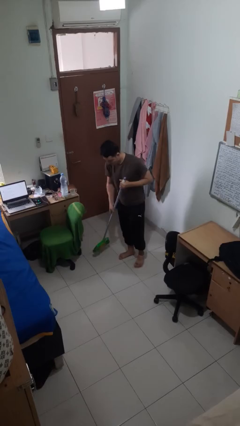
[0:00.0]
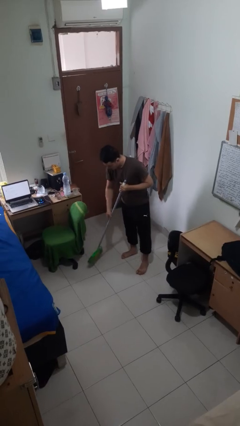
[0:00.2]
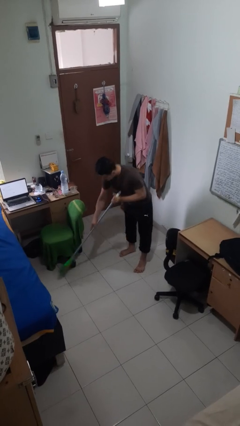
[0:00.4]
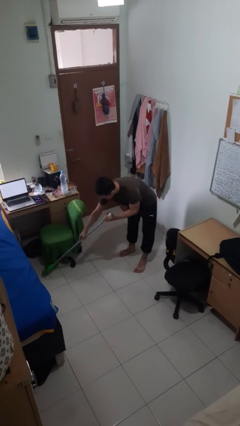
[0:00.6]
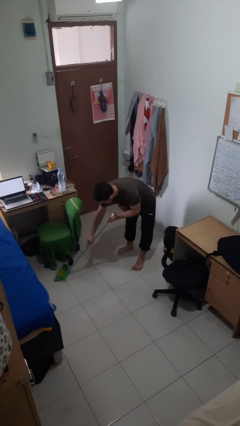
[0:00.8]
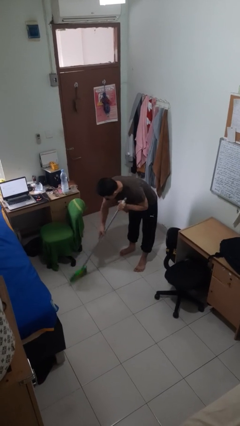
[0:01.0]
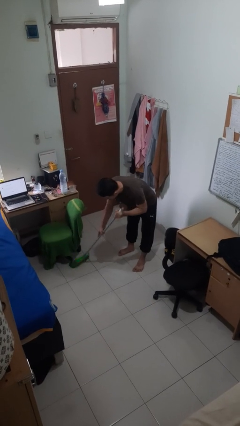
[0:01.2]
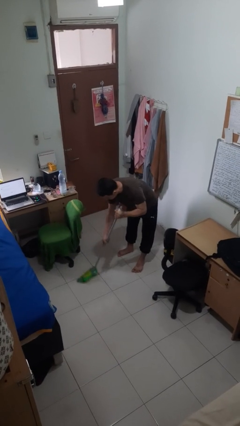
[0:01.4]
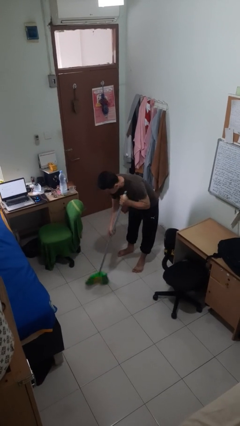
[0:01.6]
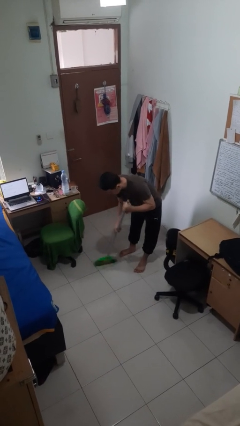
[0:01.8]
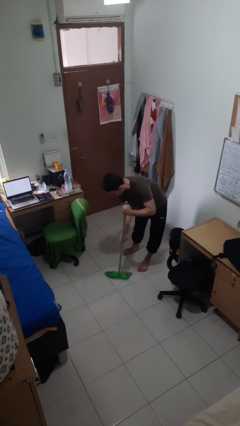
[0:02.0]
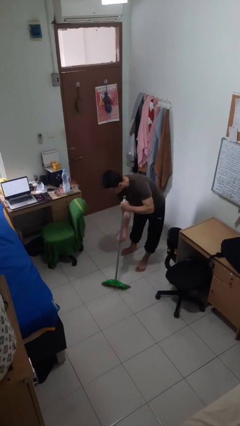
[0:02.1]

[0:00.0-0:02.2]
person sweeps floor

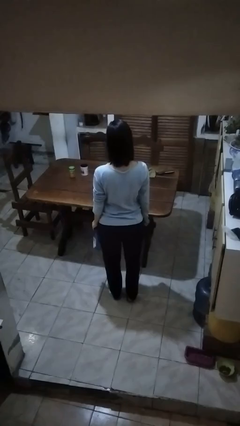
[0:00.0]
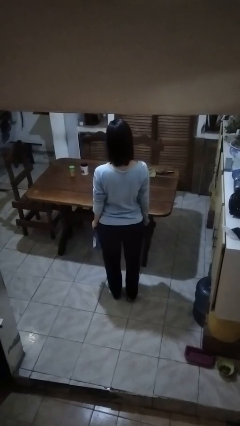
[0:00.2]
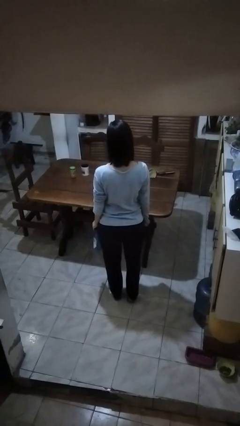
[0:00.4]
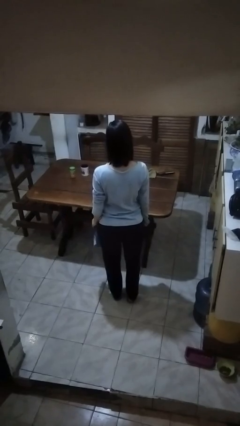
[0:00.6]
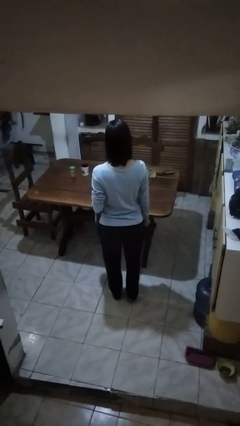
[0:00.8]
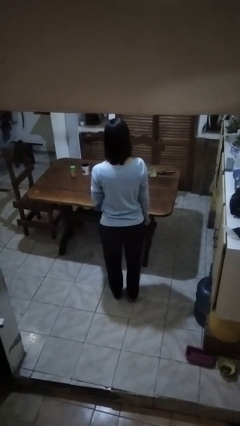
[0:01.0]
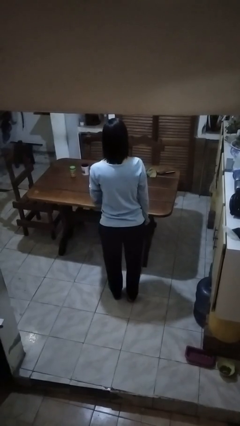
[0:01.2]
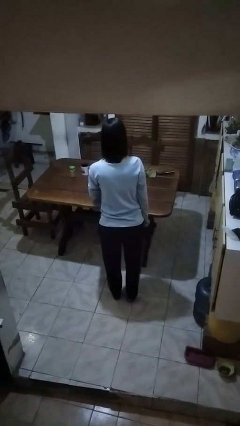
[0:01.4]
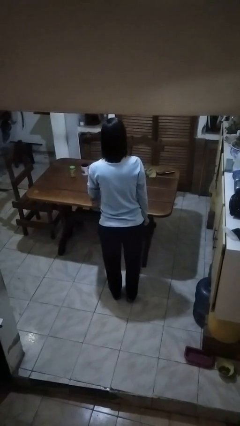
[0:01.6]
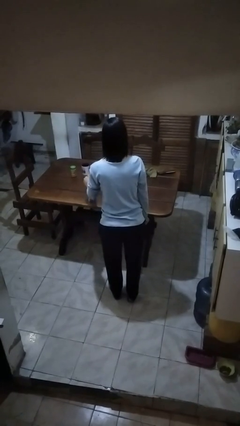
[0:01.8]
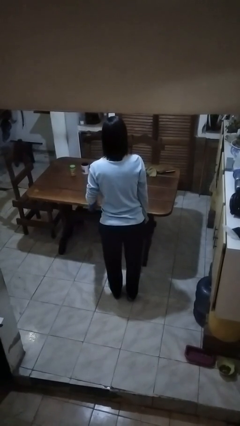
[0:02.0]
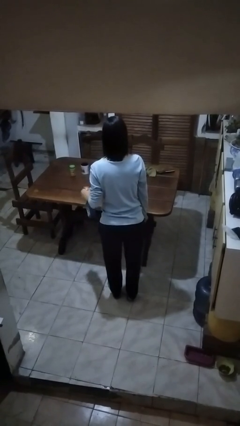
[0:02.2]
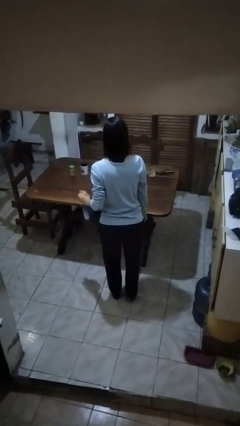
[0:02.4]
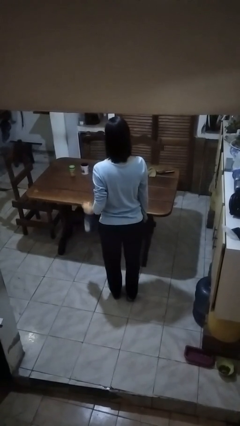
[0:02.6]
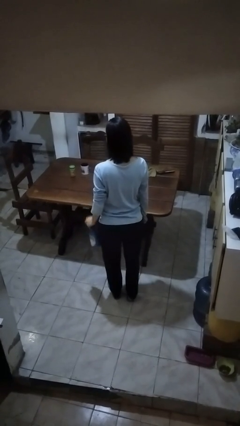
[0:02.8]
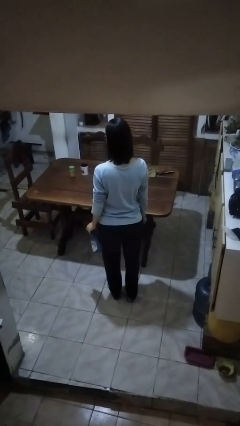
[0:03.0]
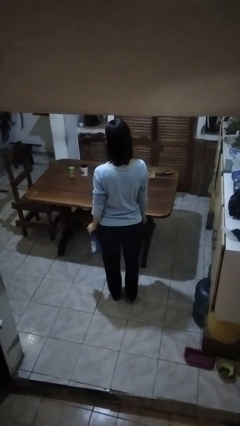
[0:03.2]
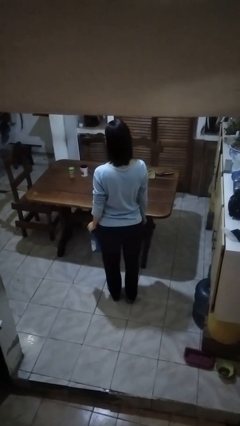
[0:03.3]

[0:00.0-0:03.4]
person sprays from bottle

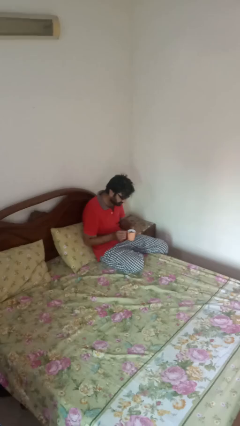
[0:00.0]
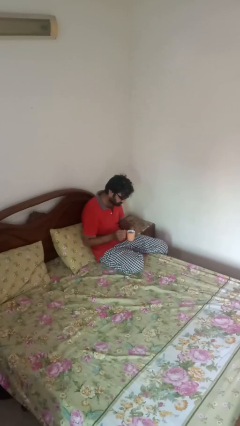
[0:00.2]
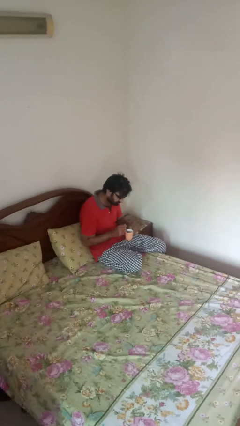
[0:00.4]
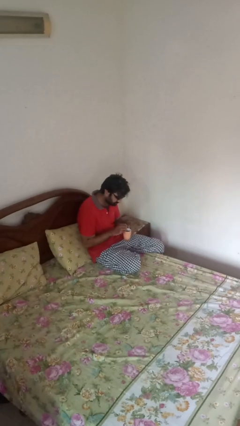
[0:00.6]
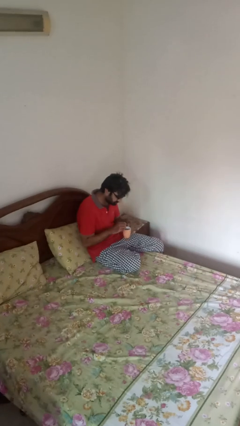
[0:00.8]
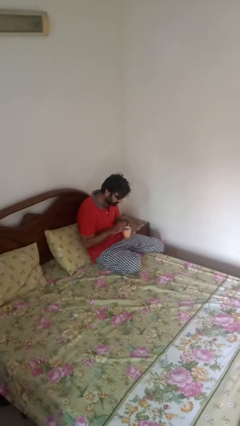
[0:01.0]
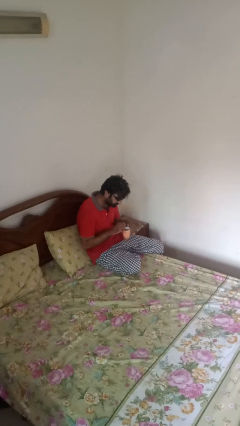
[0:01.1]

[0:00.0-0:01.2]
person stirs mug

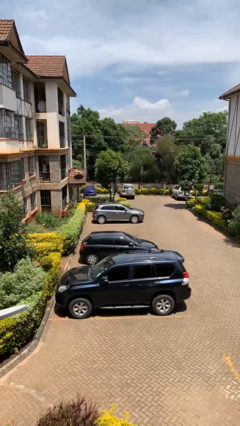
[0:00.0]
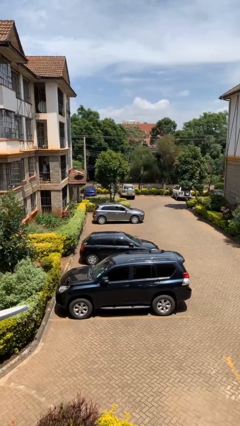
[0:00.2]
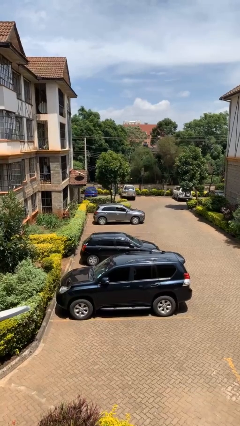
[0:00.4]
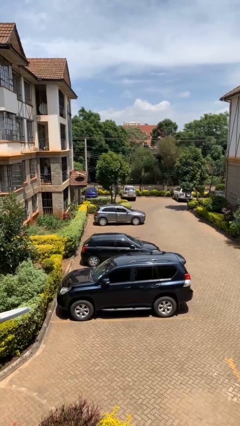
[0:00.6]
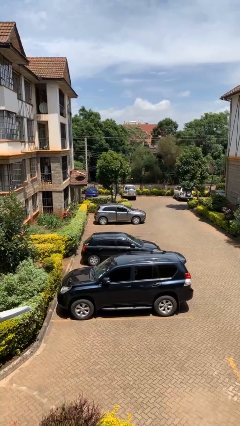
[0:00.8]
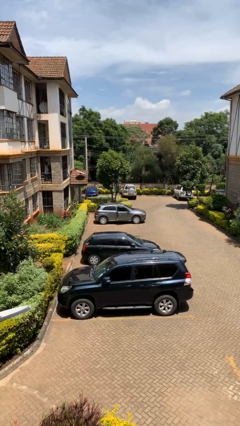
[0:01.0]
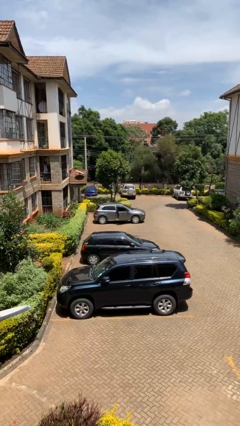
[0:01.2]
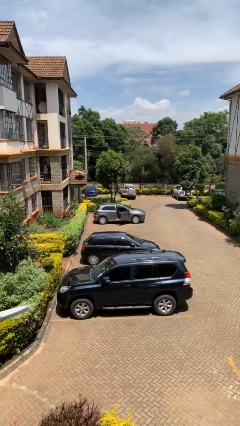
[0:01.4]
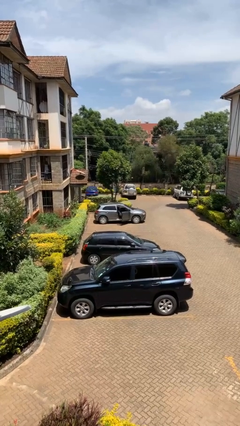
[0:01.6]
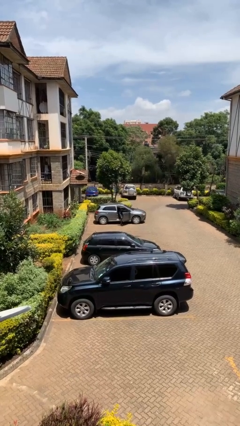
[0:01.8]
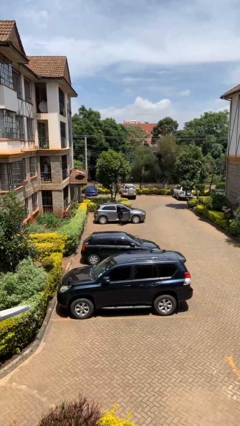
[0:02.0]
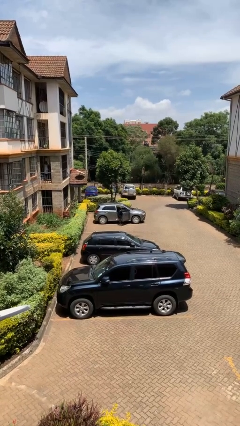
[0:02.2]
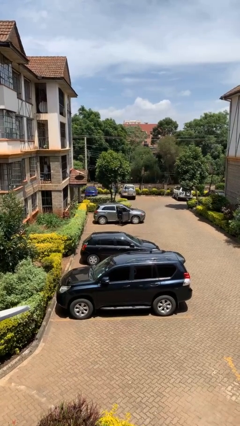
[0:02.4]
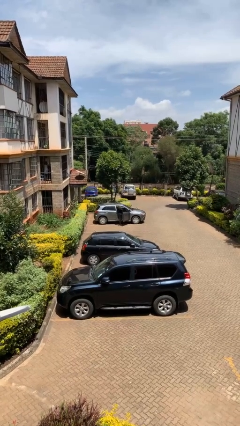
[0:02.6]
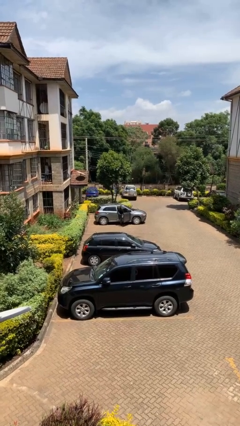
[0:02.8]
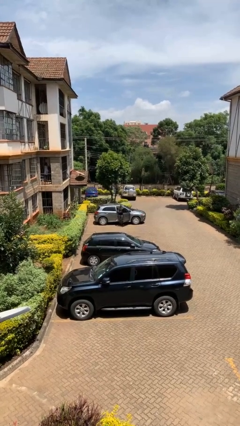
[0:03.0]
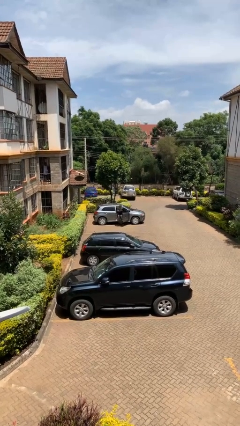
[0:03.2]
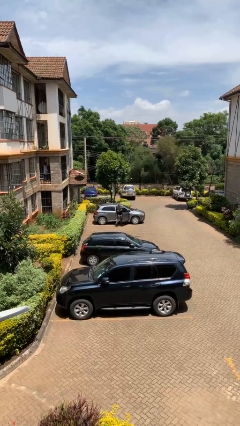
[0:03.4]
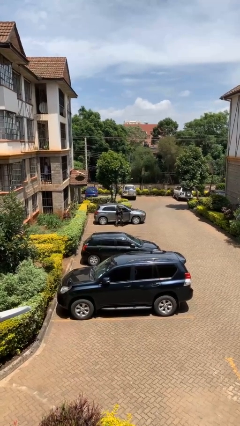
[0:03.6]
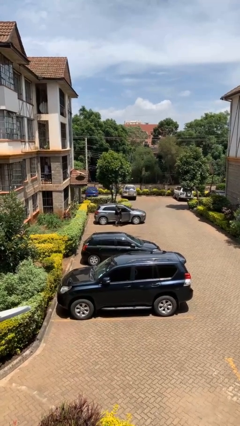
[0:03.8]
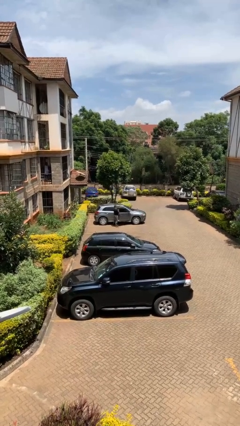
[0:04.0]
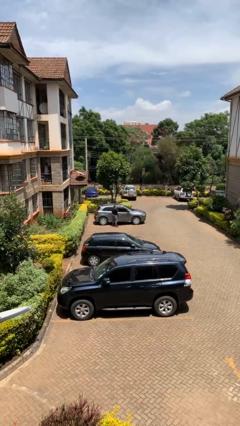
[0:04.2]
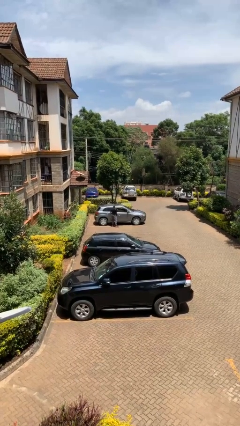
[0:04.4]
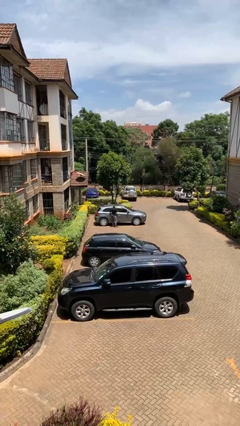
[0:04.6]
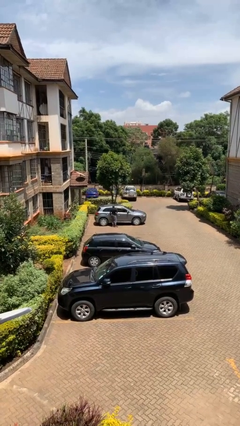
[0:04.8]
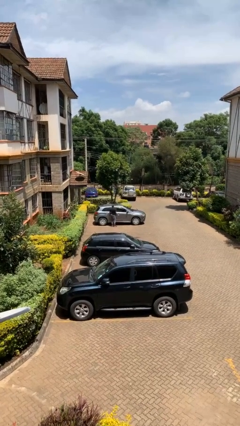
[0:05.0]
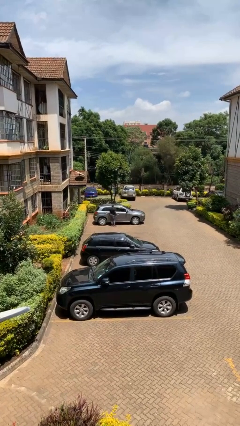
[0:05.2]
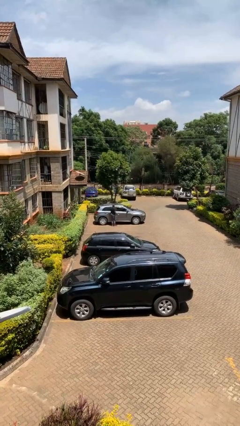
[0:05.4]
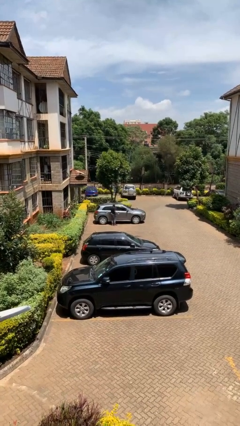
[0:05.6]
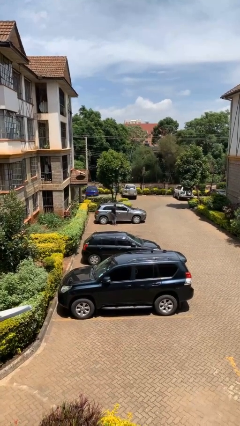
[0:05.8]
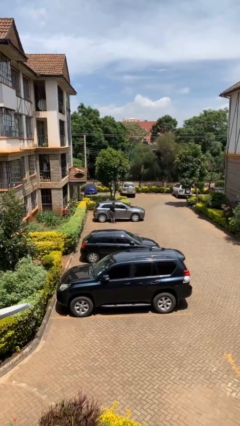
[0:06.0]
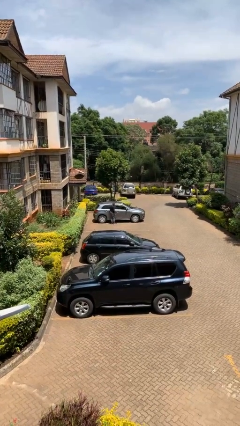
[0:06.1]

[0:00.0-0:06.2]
car drops off person

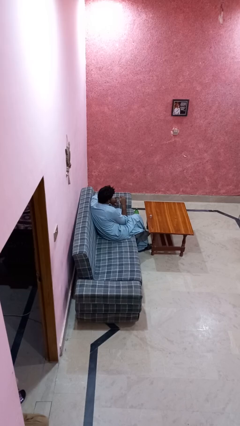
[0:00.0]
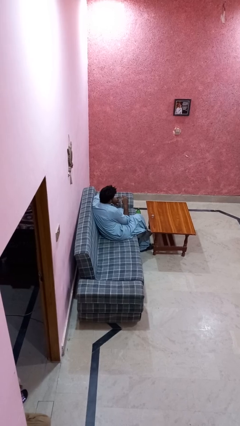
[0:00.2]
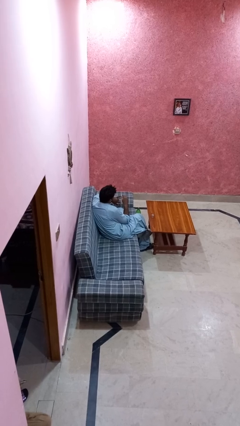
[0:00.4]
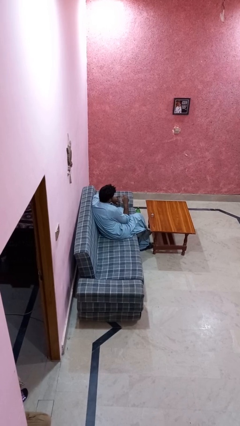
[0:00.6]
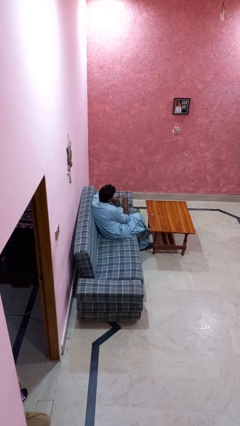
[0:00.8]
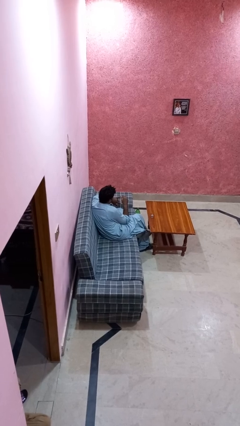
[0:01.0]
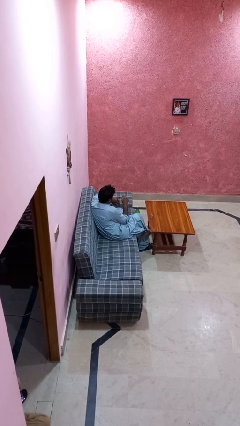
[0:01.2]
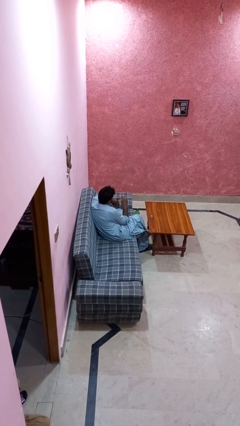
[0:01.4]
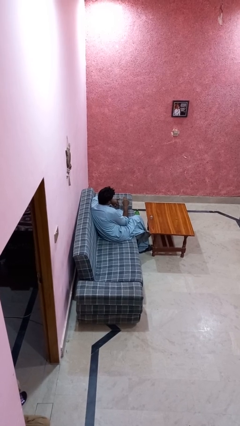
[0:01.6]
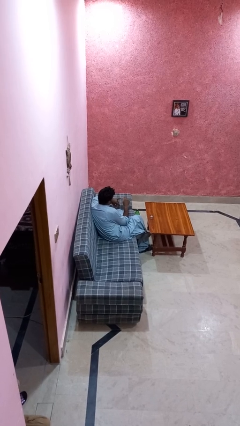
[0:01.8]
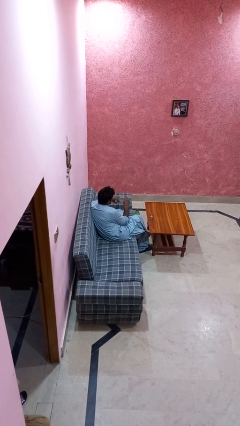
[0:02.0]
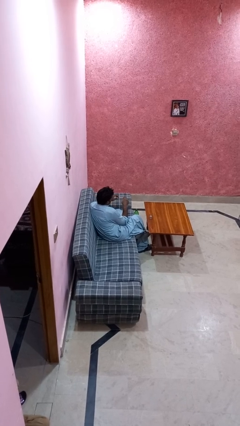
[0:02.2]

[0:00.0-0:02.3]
person paints fingernails

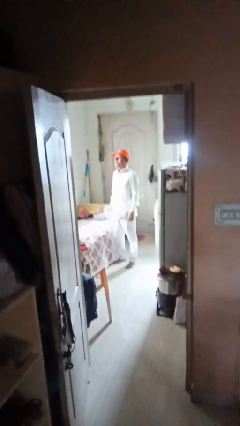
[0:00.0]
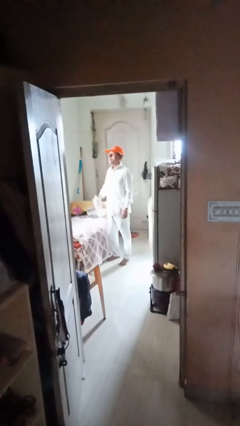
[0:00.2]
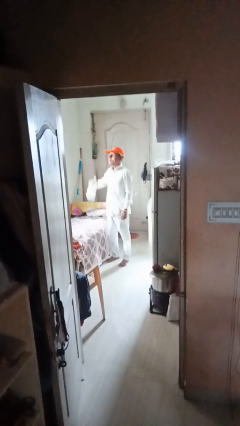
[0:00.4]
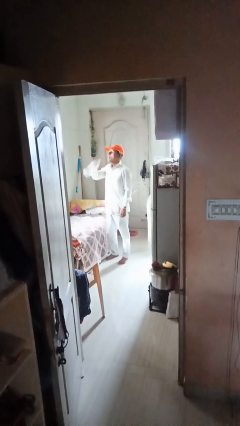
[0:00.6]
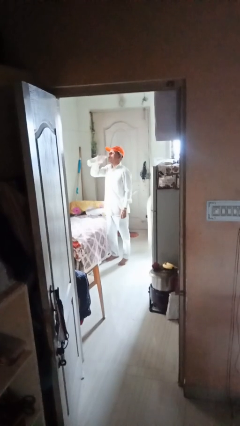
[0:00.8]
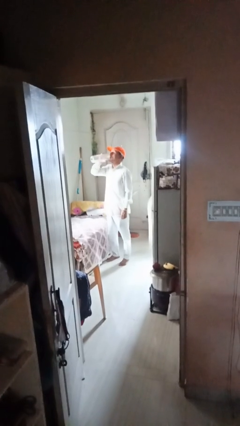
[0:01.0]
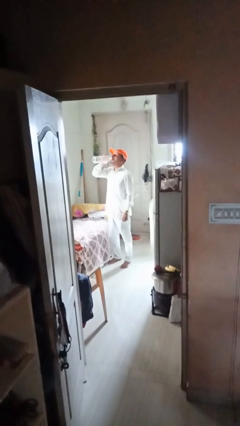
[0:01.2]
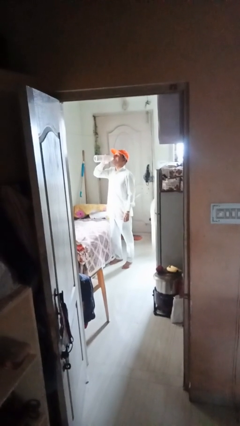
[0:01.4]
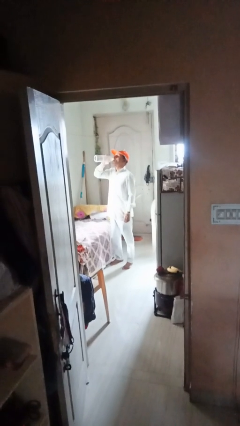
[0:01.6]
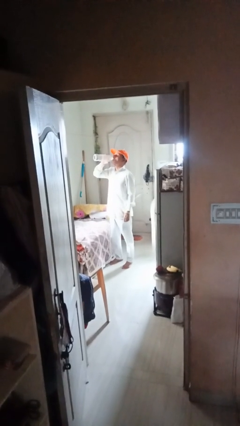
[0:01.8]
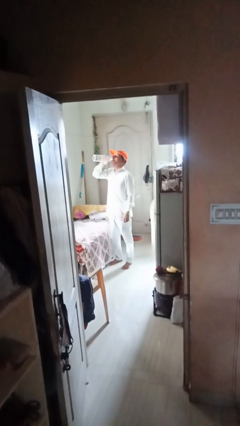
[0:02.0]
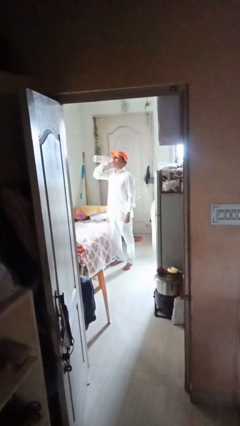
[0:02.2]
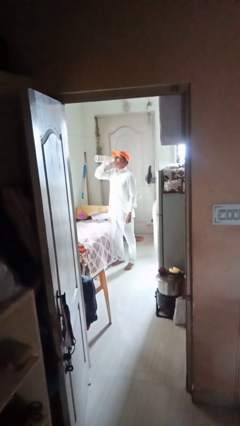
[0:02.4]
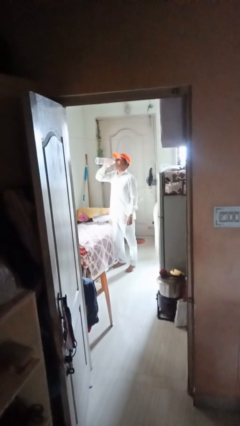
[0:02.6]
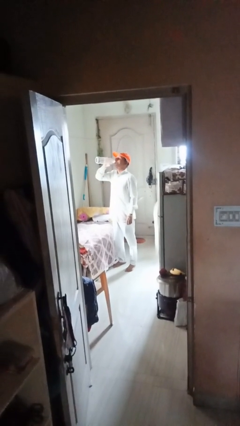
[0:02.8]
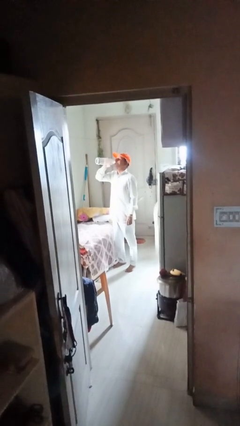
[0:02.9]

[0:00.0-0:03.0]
person drinks from bottle
